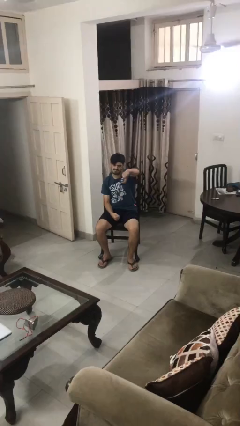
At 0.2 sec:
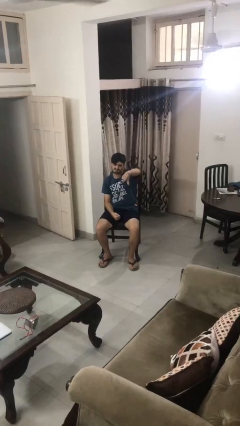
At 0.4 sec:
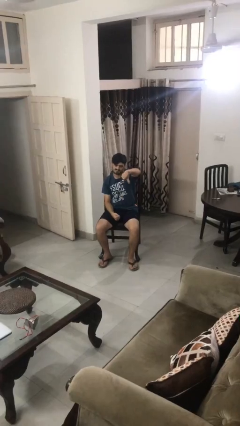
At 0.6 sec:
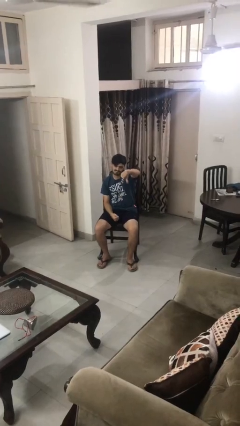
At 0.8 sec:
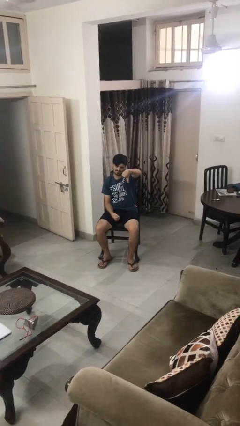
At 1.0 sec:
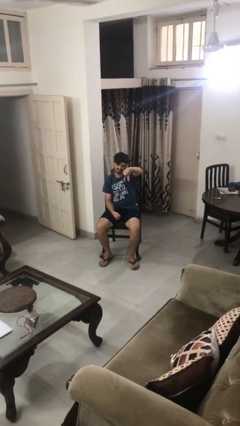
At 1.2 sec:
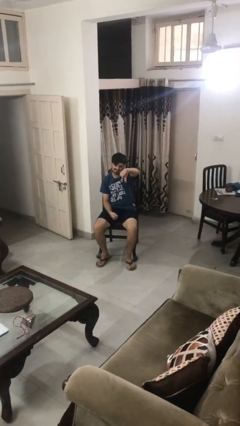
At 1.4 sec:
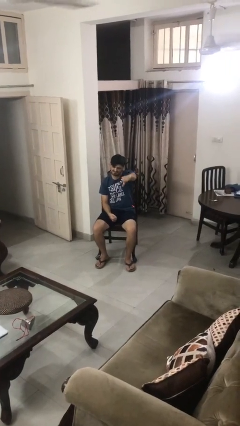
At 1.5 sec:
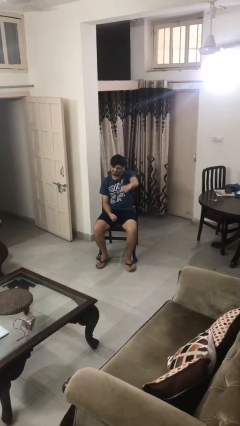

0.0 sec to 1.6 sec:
person gestures thumbs down

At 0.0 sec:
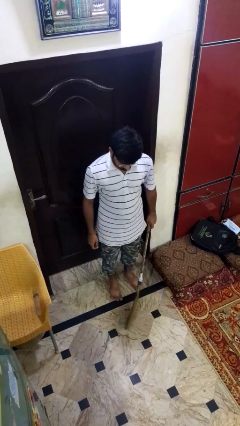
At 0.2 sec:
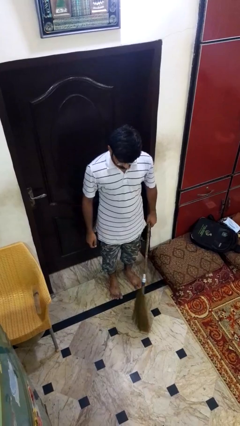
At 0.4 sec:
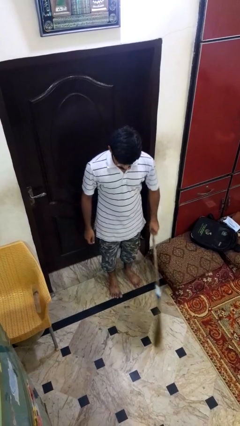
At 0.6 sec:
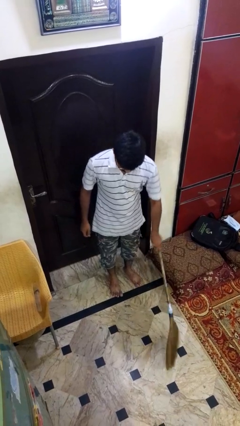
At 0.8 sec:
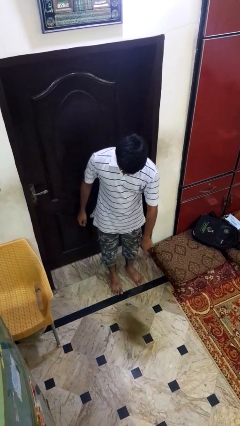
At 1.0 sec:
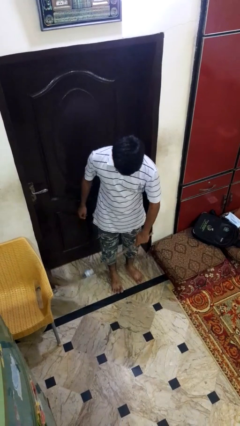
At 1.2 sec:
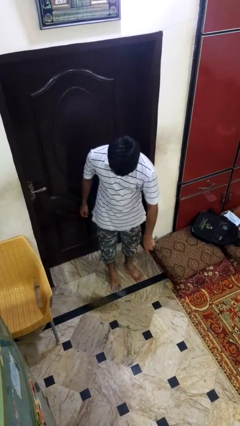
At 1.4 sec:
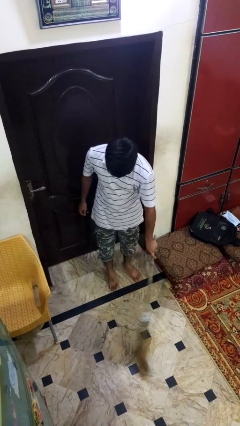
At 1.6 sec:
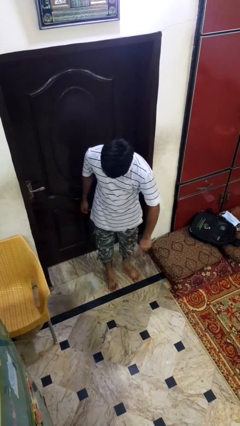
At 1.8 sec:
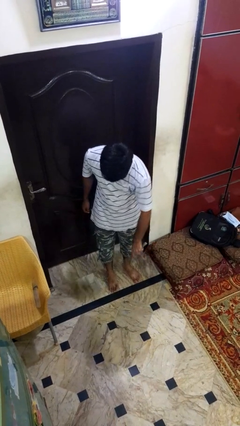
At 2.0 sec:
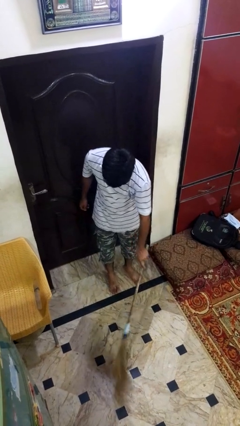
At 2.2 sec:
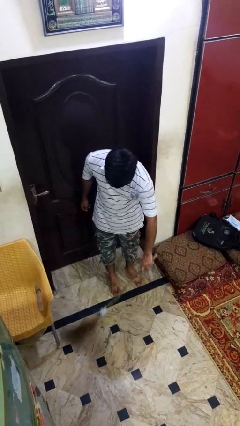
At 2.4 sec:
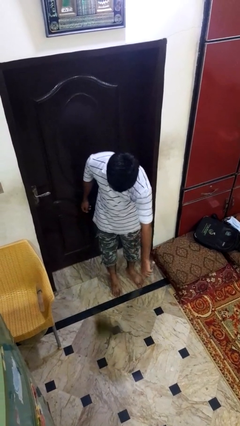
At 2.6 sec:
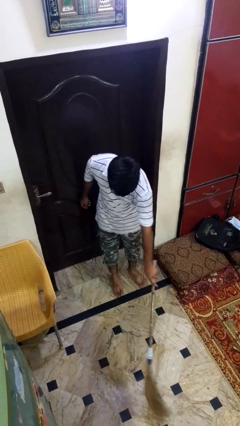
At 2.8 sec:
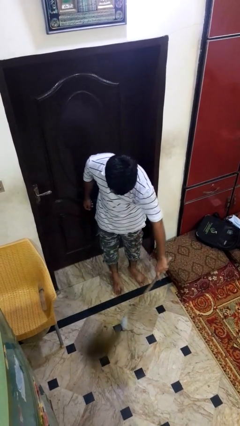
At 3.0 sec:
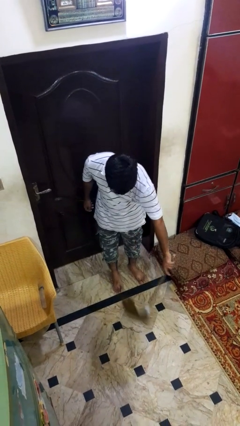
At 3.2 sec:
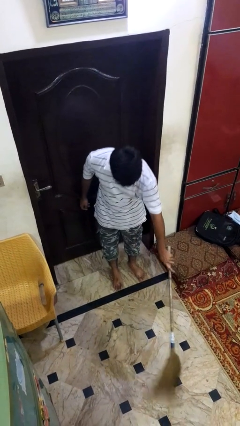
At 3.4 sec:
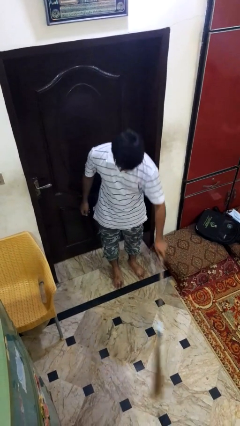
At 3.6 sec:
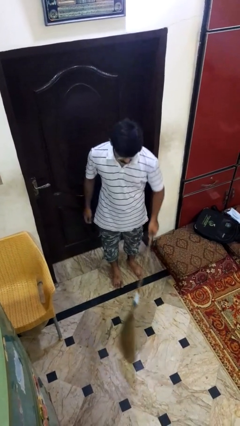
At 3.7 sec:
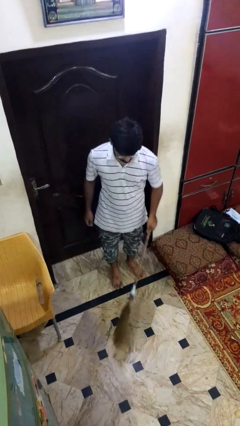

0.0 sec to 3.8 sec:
person sweeps floor

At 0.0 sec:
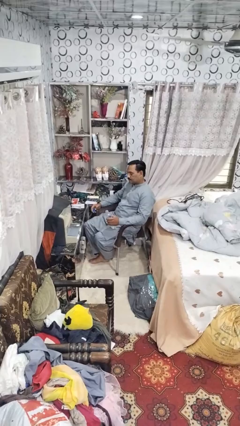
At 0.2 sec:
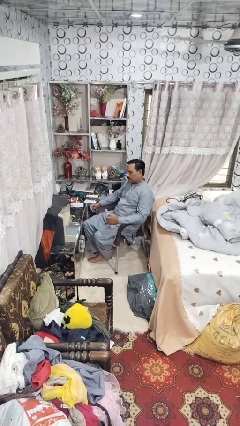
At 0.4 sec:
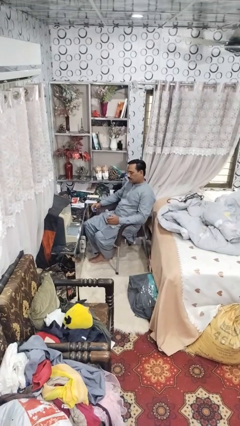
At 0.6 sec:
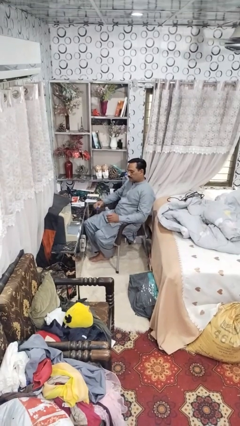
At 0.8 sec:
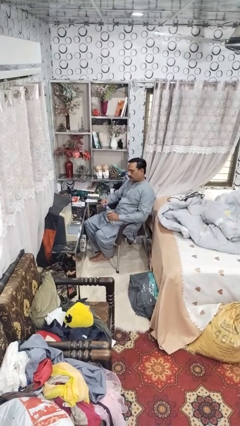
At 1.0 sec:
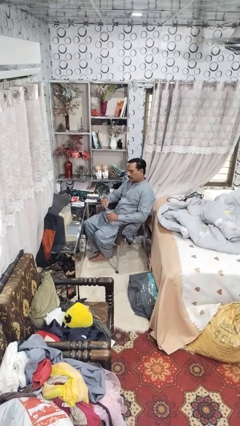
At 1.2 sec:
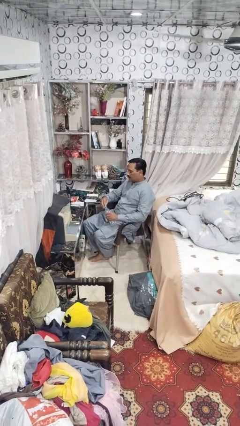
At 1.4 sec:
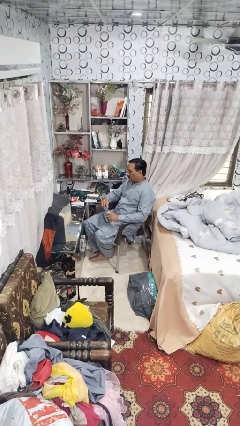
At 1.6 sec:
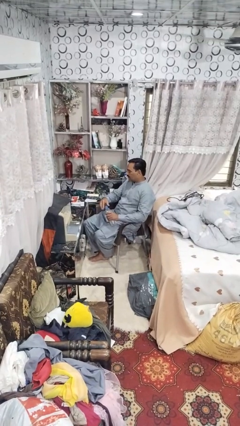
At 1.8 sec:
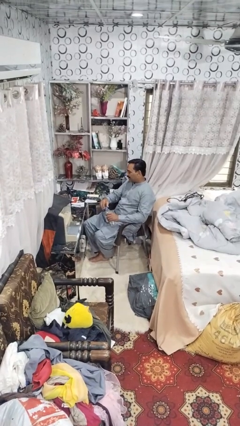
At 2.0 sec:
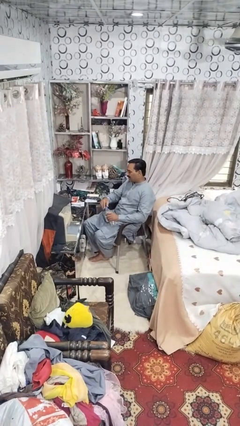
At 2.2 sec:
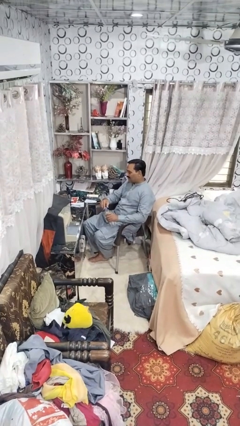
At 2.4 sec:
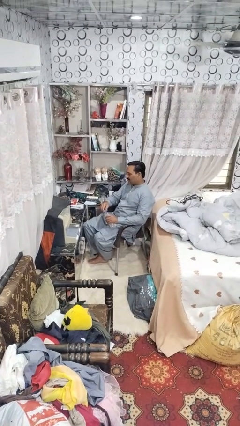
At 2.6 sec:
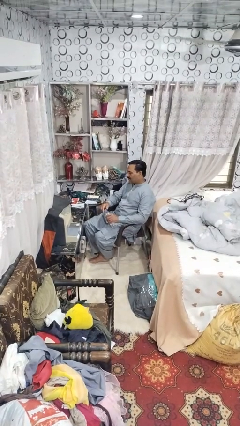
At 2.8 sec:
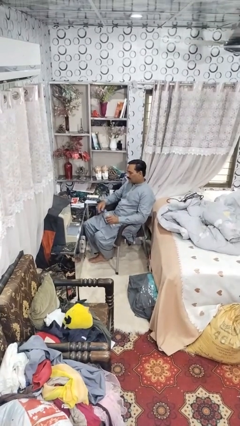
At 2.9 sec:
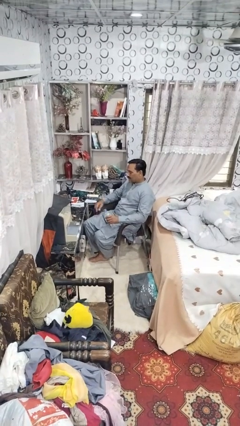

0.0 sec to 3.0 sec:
person screws lid to bottle

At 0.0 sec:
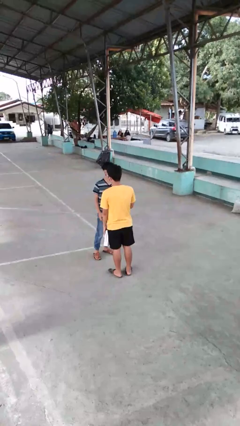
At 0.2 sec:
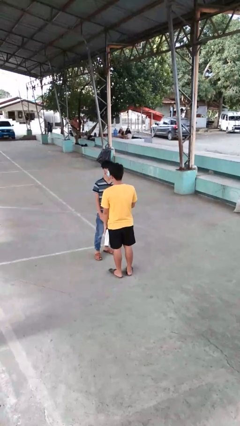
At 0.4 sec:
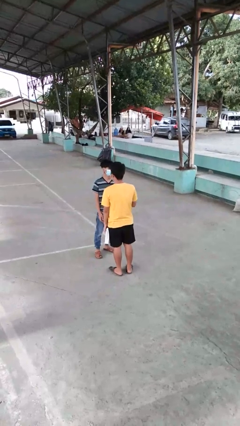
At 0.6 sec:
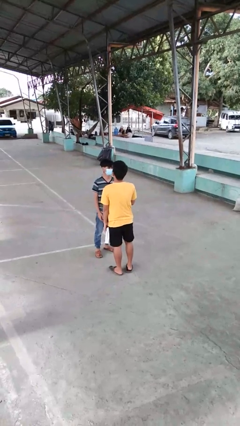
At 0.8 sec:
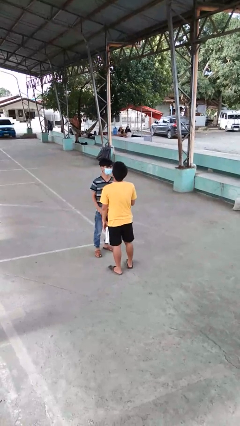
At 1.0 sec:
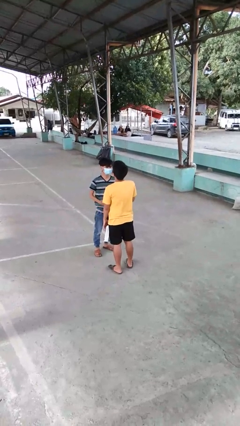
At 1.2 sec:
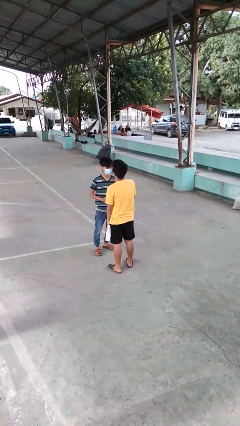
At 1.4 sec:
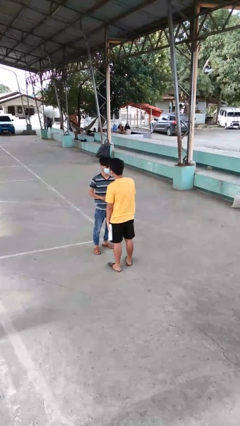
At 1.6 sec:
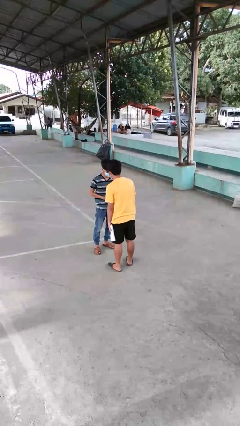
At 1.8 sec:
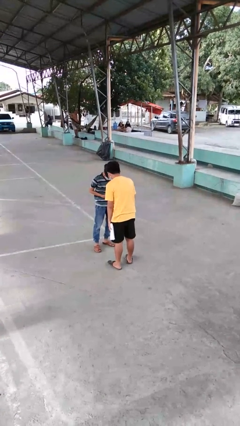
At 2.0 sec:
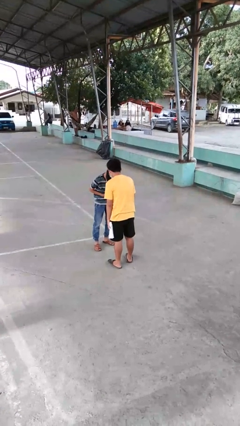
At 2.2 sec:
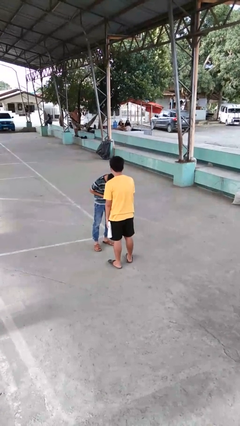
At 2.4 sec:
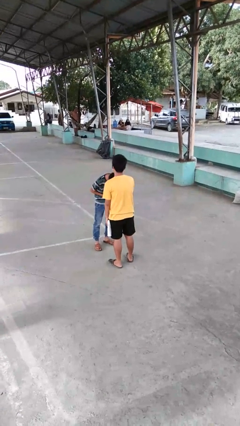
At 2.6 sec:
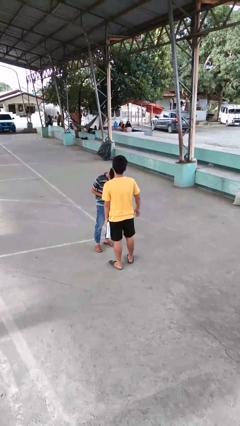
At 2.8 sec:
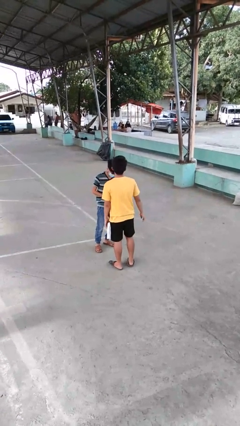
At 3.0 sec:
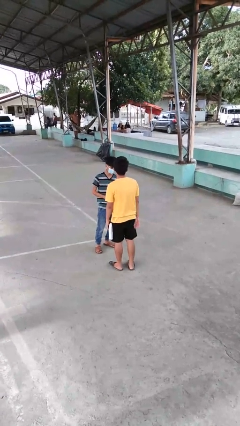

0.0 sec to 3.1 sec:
person laughs with person

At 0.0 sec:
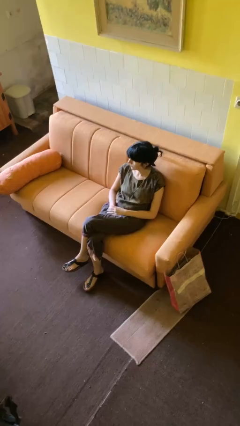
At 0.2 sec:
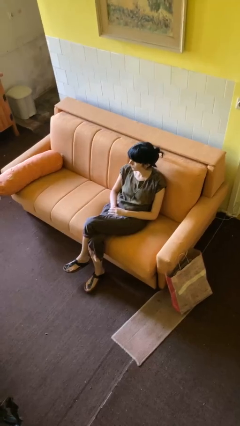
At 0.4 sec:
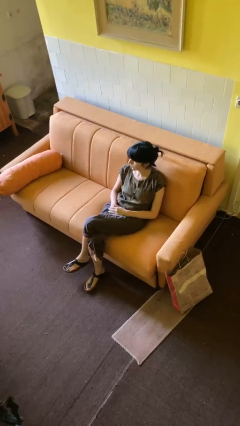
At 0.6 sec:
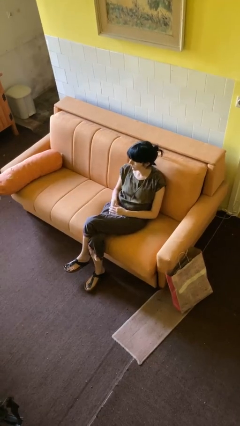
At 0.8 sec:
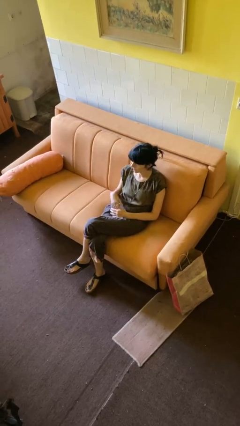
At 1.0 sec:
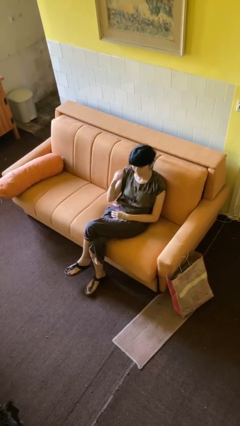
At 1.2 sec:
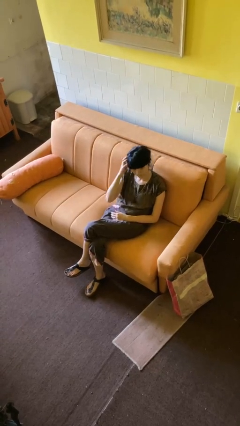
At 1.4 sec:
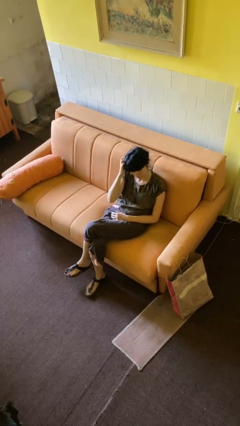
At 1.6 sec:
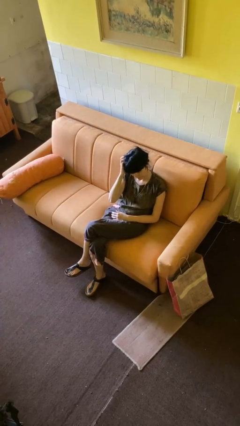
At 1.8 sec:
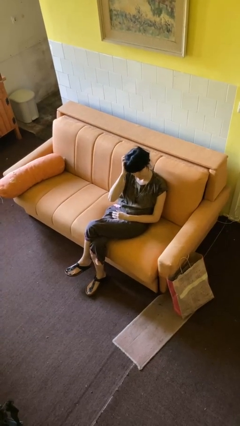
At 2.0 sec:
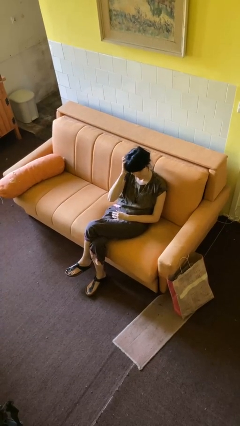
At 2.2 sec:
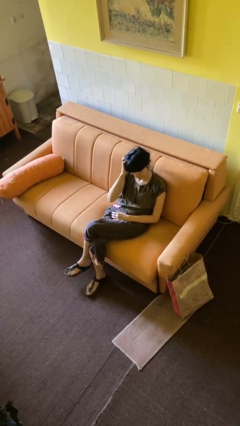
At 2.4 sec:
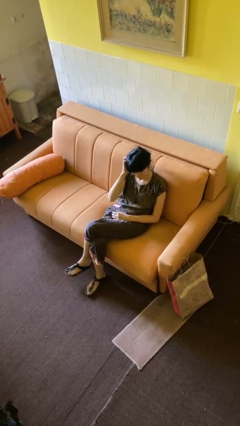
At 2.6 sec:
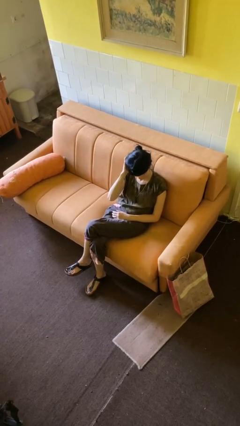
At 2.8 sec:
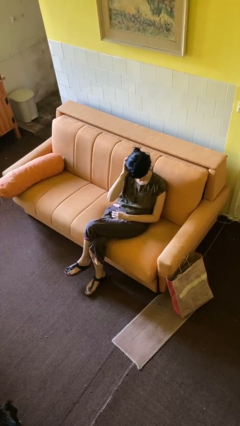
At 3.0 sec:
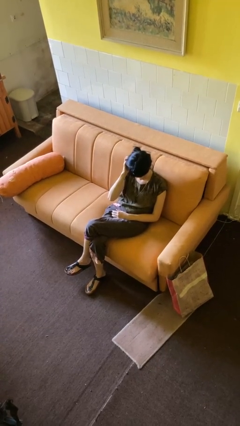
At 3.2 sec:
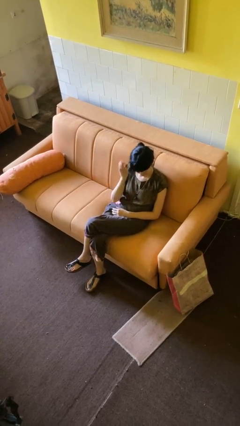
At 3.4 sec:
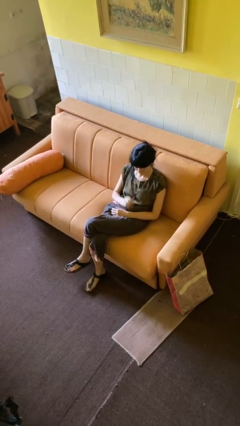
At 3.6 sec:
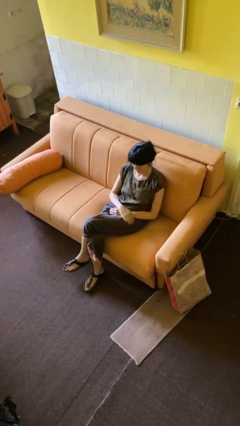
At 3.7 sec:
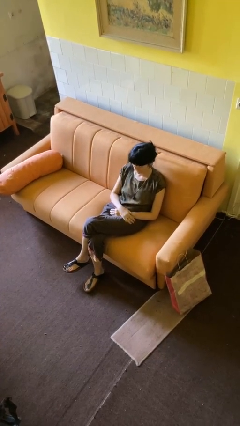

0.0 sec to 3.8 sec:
person scratches face

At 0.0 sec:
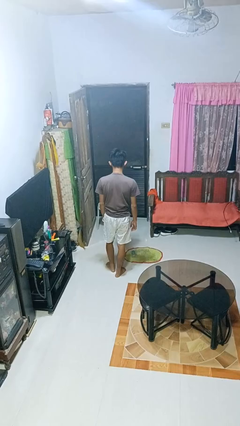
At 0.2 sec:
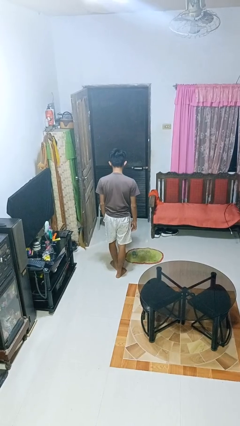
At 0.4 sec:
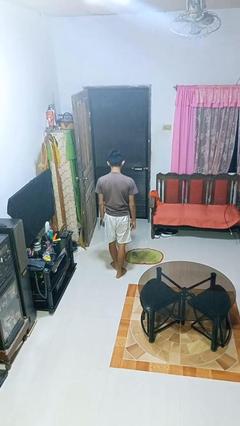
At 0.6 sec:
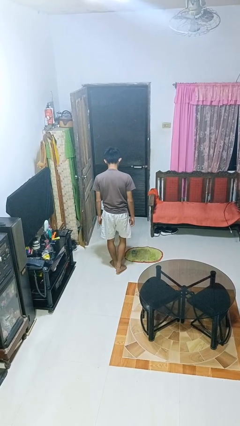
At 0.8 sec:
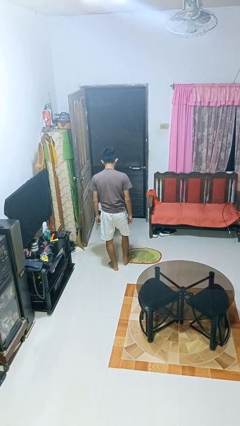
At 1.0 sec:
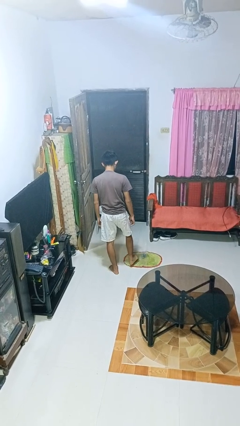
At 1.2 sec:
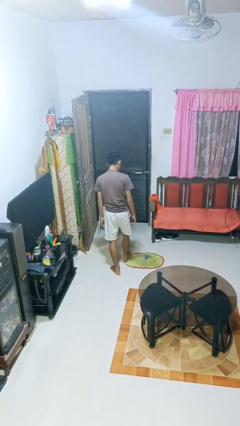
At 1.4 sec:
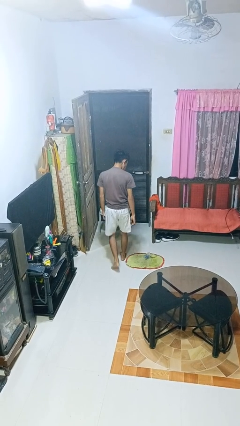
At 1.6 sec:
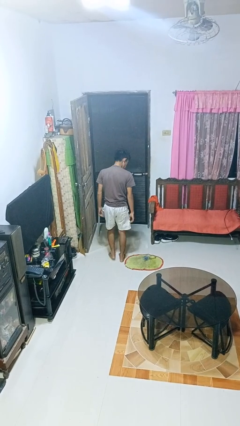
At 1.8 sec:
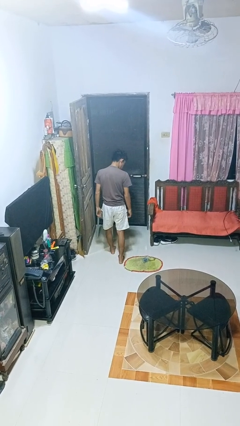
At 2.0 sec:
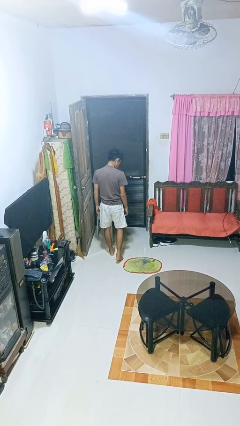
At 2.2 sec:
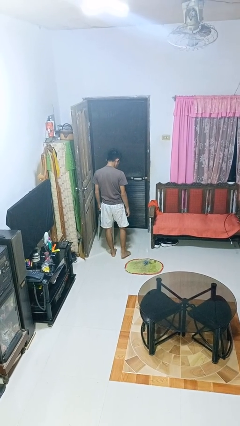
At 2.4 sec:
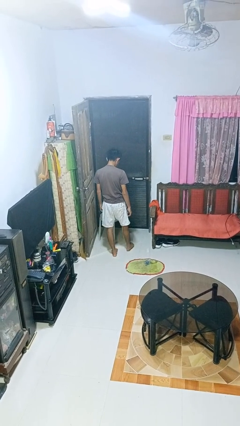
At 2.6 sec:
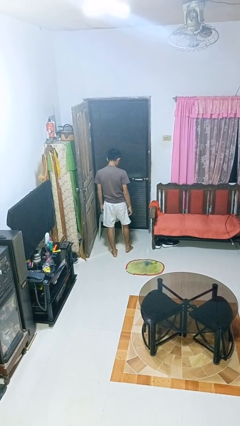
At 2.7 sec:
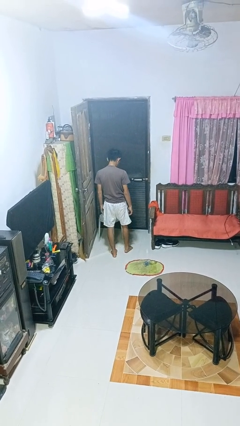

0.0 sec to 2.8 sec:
person spills on floor
